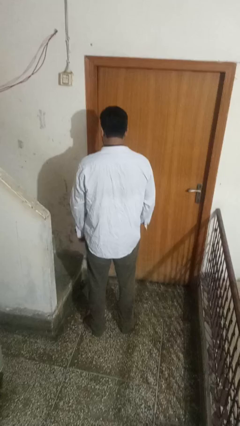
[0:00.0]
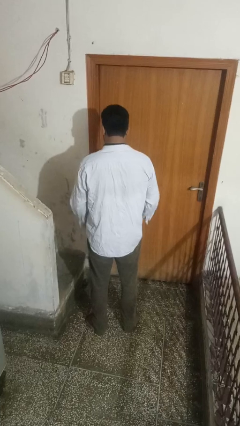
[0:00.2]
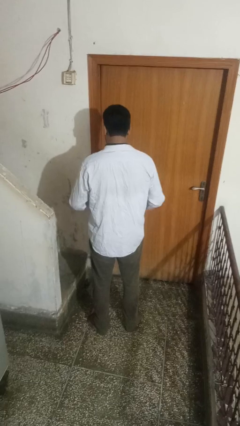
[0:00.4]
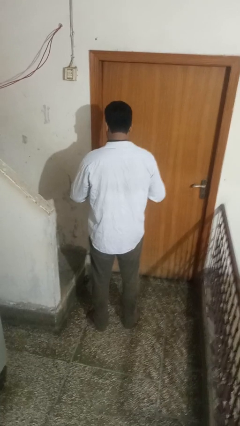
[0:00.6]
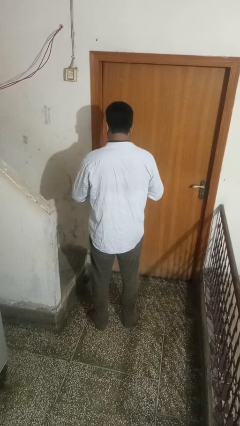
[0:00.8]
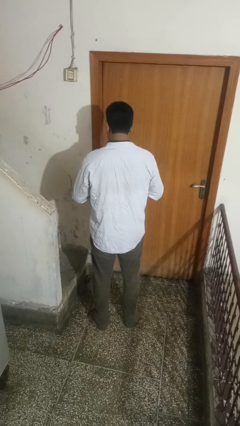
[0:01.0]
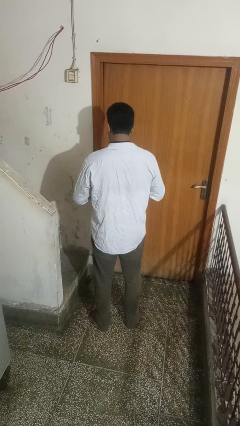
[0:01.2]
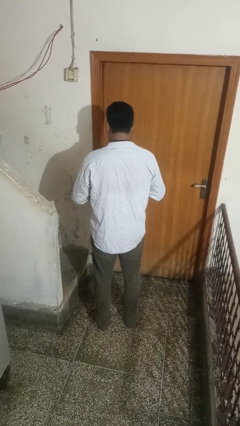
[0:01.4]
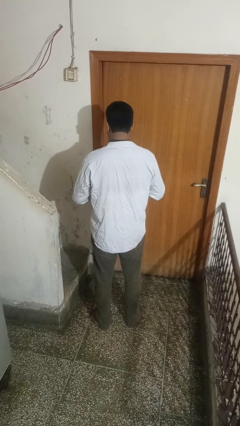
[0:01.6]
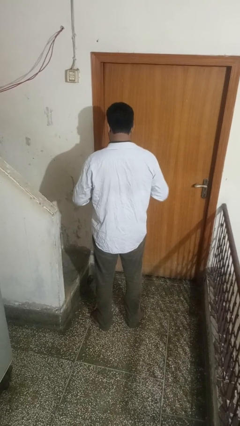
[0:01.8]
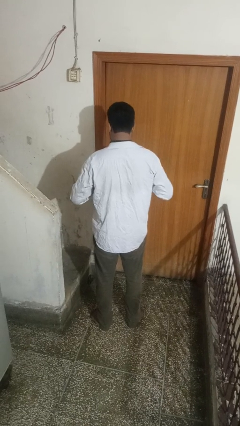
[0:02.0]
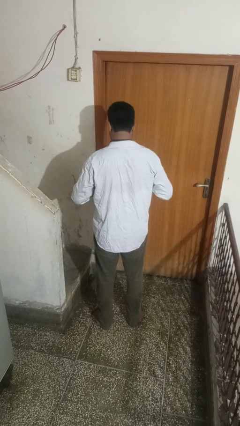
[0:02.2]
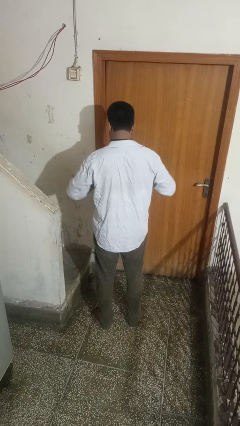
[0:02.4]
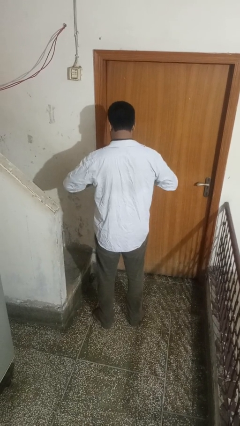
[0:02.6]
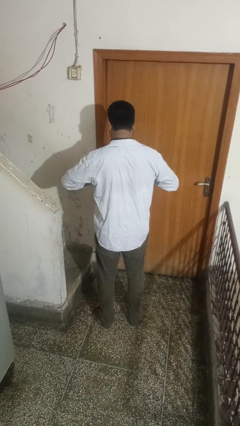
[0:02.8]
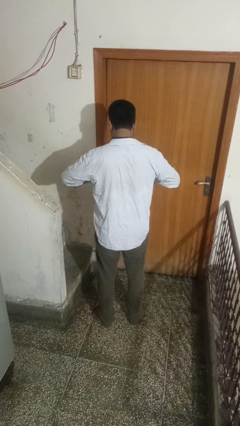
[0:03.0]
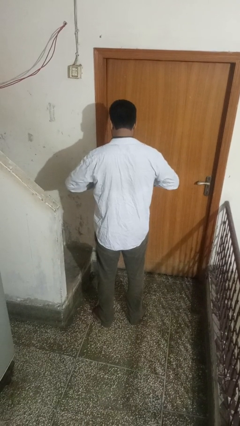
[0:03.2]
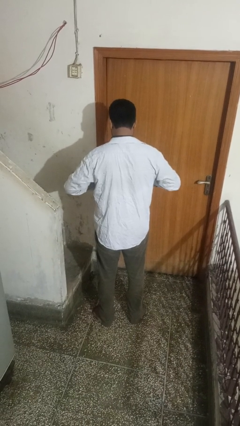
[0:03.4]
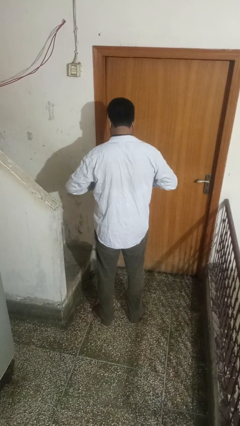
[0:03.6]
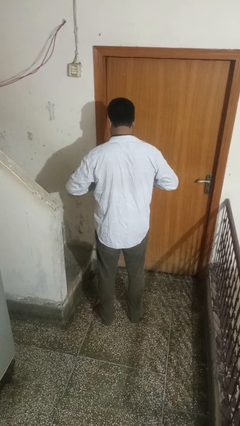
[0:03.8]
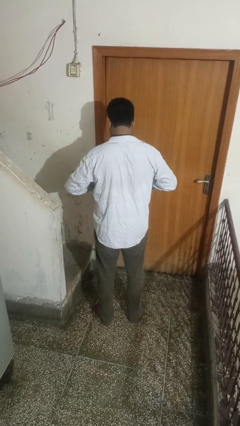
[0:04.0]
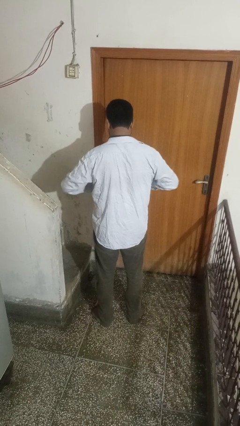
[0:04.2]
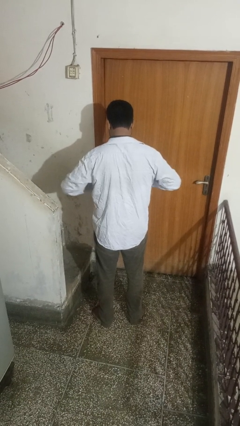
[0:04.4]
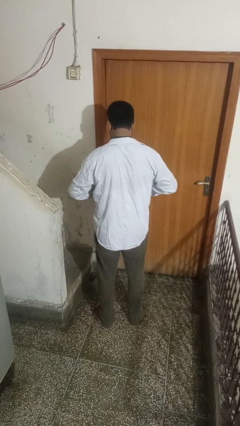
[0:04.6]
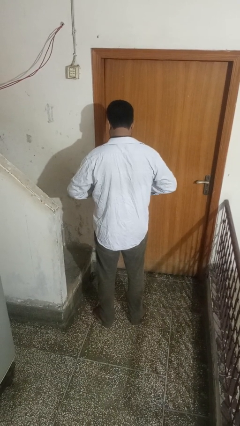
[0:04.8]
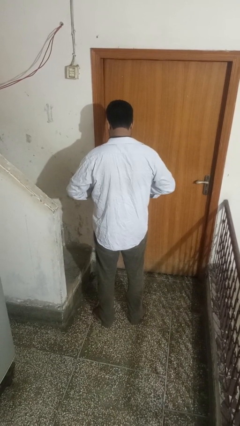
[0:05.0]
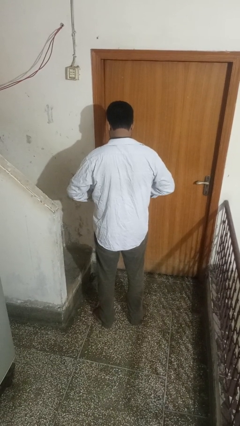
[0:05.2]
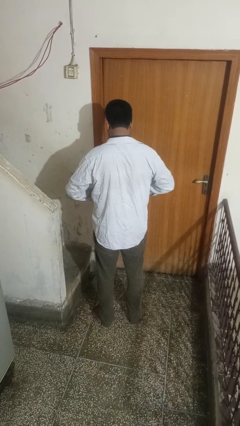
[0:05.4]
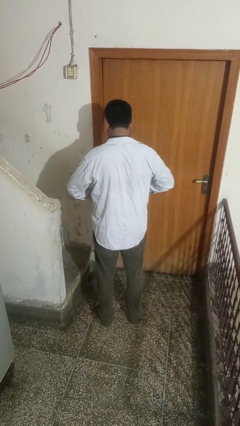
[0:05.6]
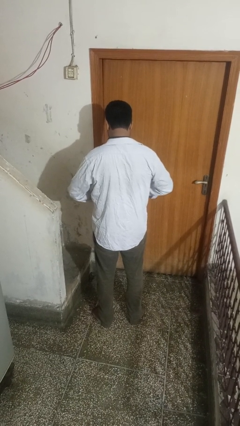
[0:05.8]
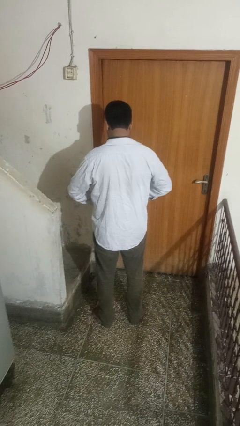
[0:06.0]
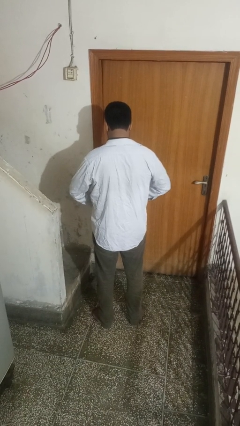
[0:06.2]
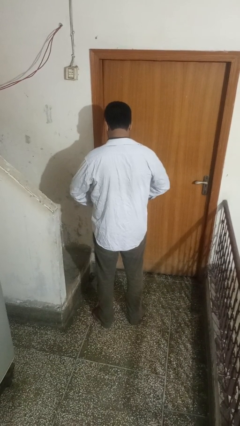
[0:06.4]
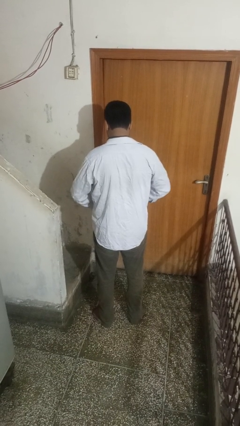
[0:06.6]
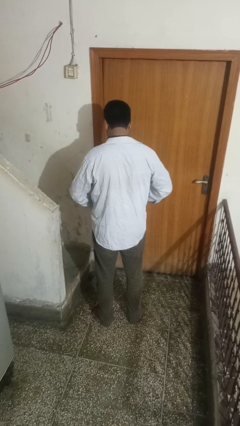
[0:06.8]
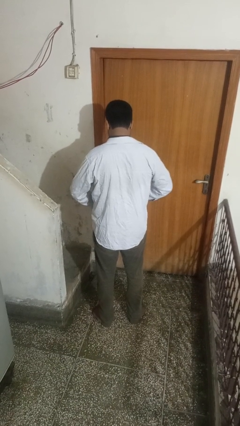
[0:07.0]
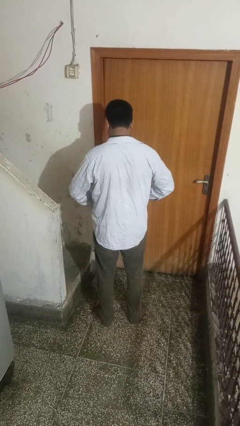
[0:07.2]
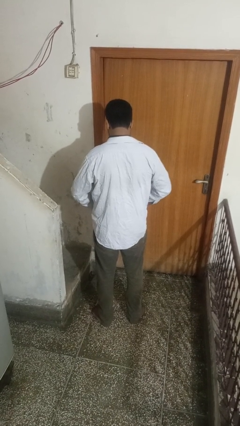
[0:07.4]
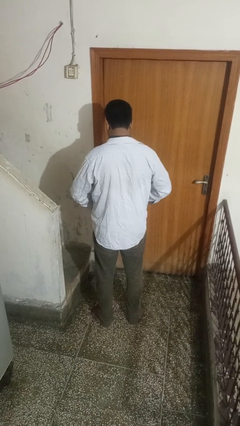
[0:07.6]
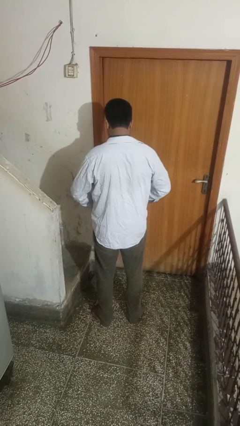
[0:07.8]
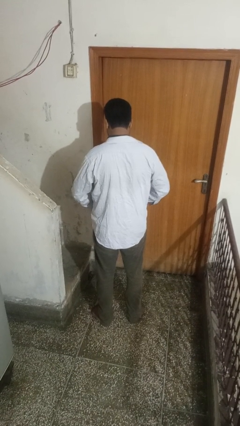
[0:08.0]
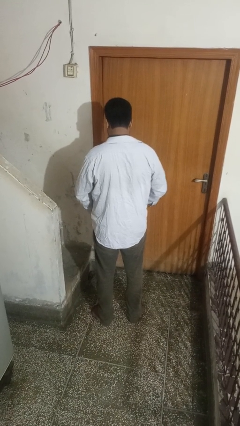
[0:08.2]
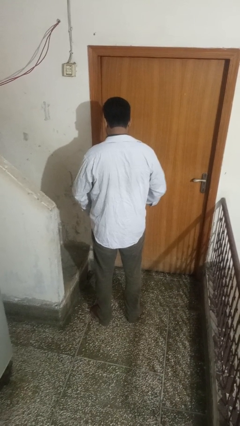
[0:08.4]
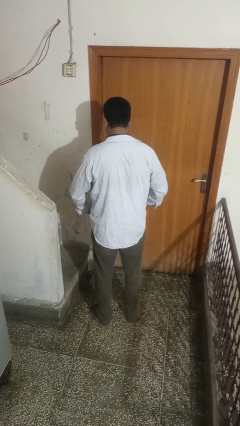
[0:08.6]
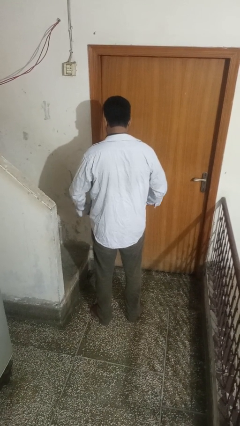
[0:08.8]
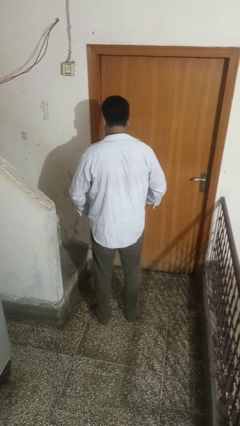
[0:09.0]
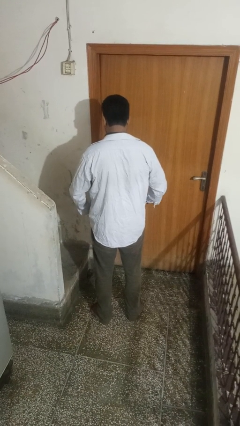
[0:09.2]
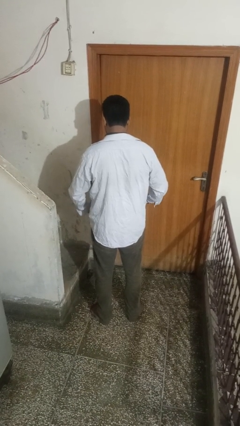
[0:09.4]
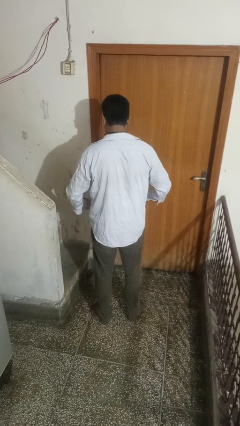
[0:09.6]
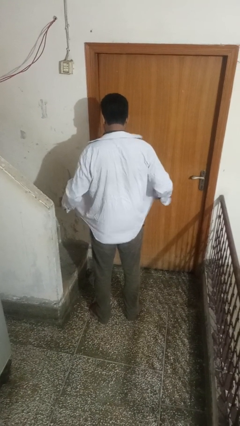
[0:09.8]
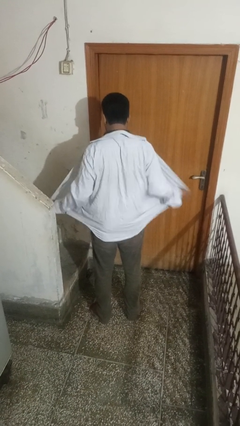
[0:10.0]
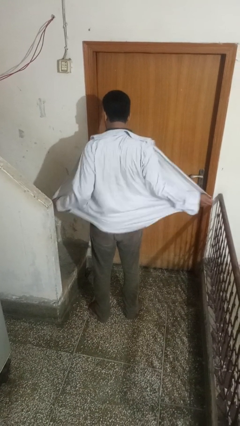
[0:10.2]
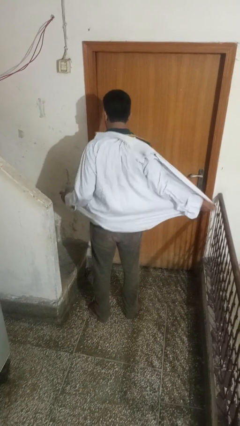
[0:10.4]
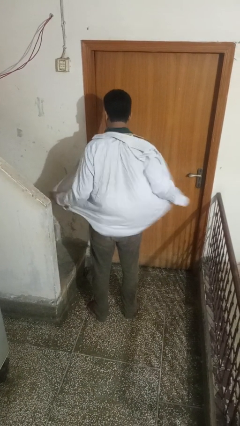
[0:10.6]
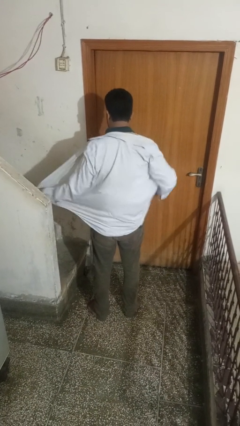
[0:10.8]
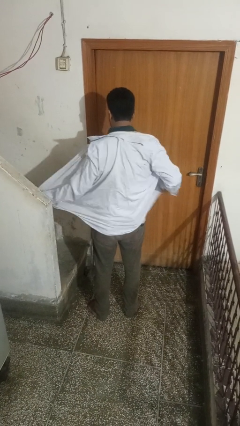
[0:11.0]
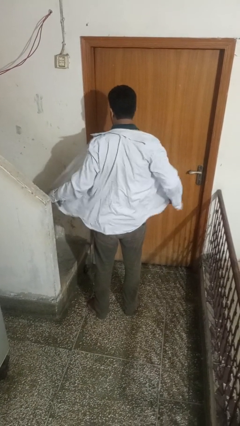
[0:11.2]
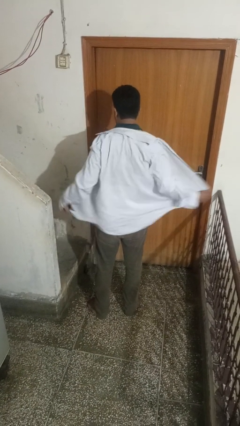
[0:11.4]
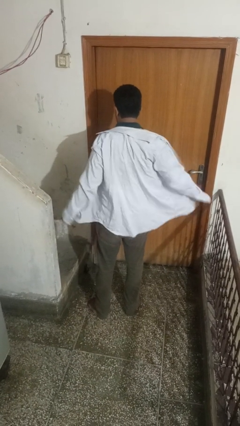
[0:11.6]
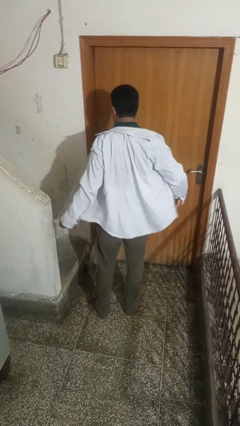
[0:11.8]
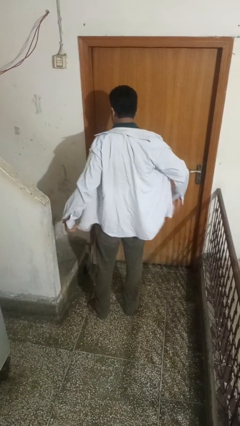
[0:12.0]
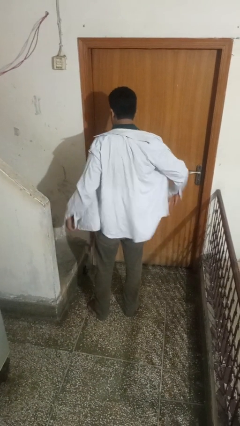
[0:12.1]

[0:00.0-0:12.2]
person unbuttons shirt

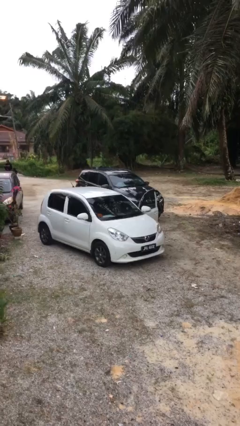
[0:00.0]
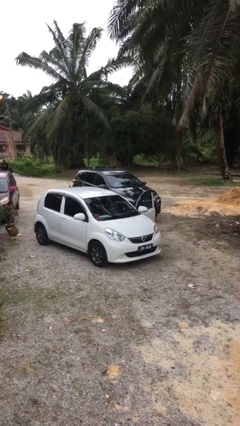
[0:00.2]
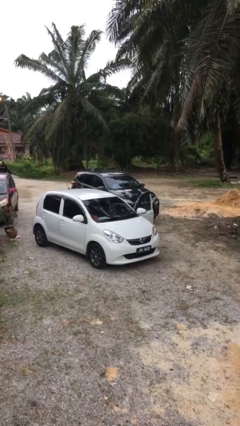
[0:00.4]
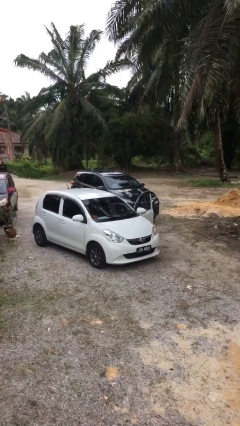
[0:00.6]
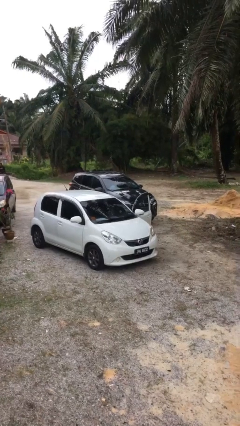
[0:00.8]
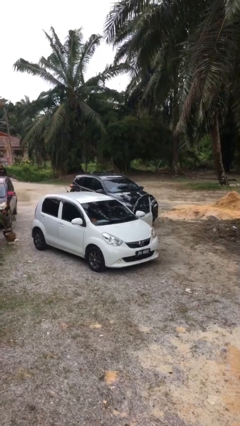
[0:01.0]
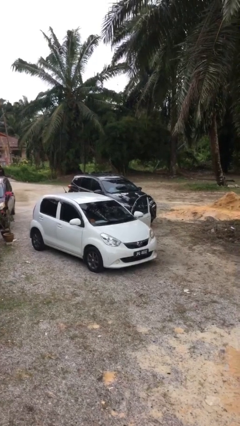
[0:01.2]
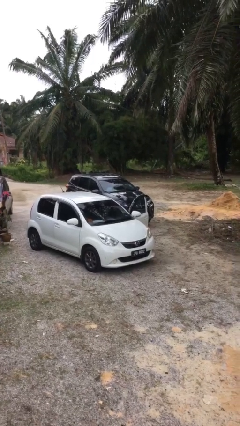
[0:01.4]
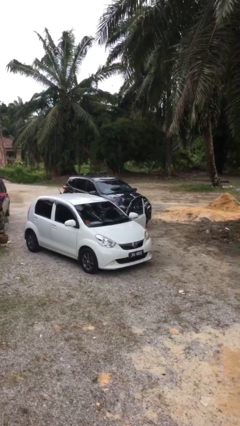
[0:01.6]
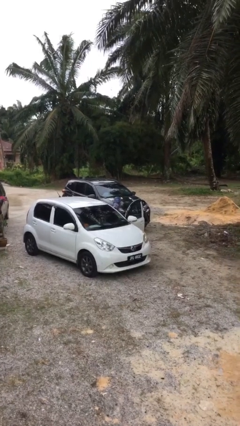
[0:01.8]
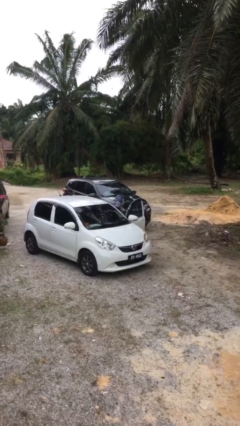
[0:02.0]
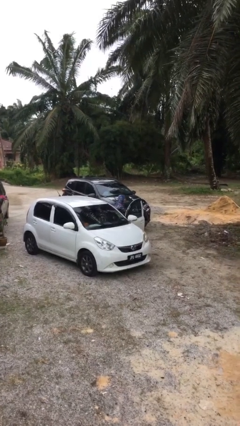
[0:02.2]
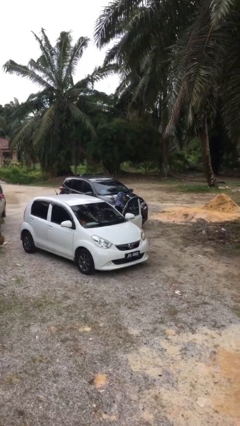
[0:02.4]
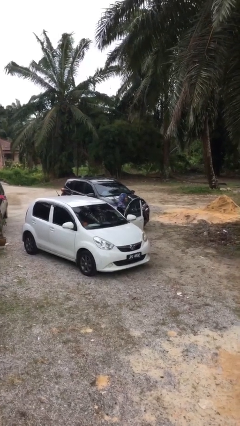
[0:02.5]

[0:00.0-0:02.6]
person exits car

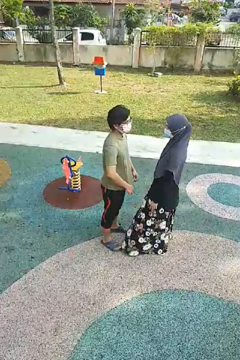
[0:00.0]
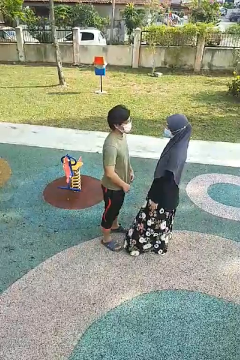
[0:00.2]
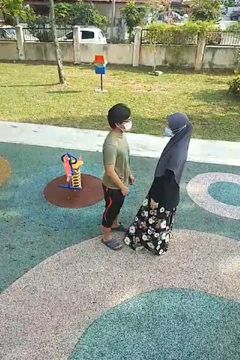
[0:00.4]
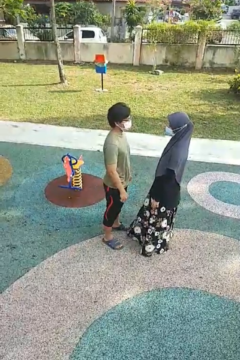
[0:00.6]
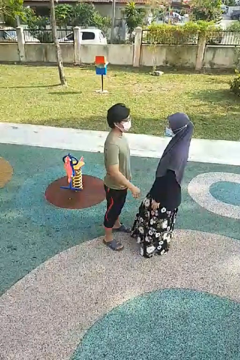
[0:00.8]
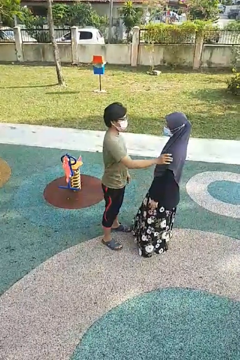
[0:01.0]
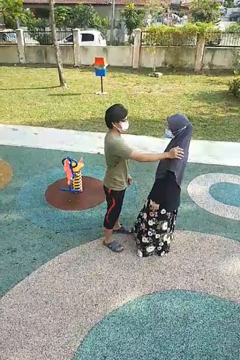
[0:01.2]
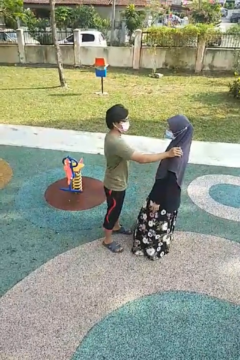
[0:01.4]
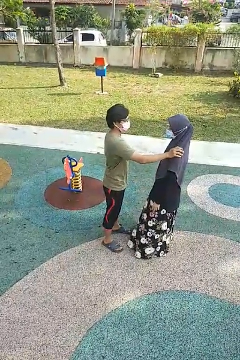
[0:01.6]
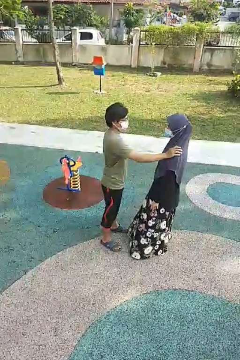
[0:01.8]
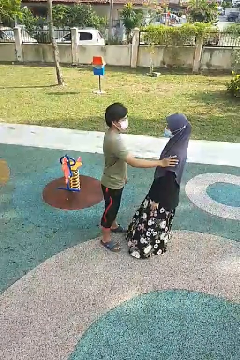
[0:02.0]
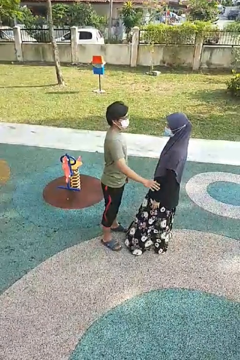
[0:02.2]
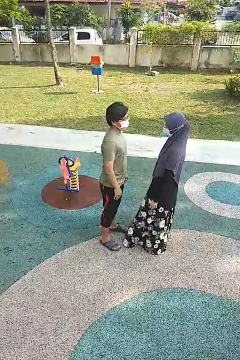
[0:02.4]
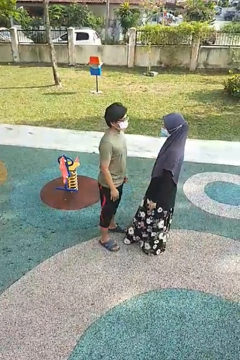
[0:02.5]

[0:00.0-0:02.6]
person pounds shoulders of person

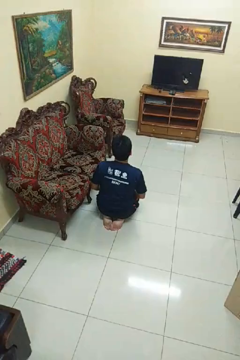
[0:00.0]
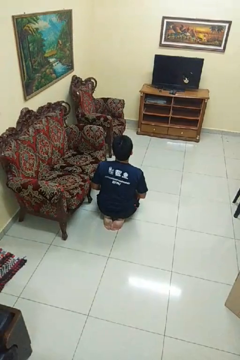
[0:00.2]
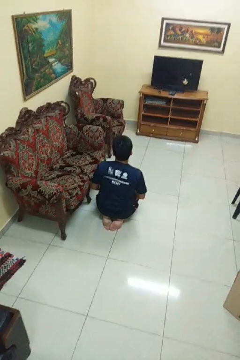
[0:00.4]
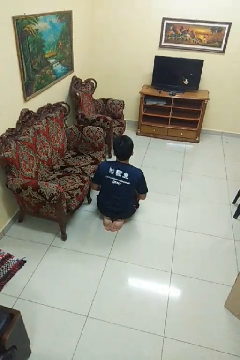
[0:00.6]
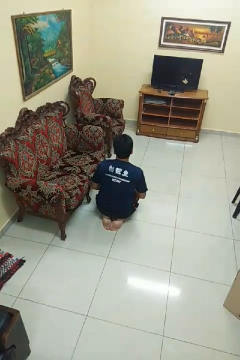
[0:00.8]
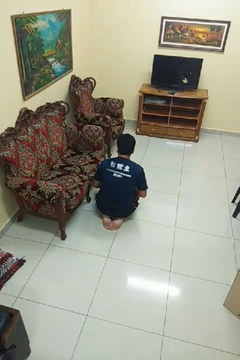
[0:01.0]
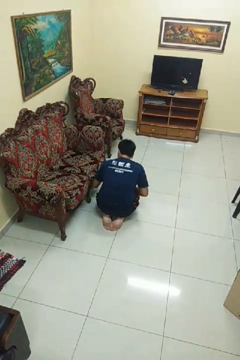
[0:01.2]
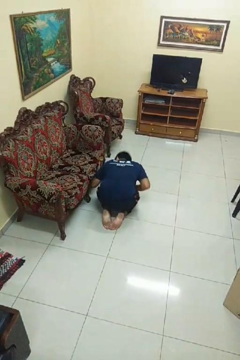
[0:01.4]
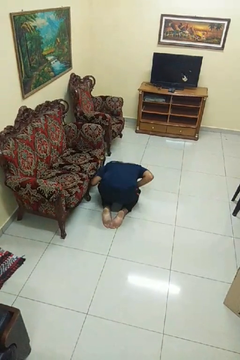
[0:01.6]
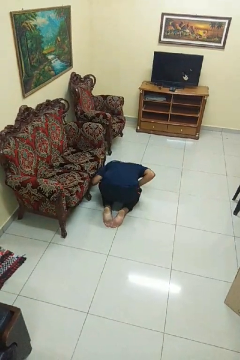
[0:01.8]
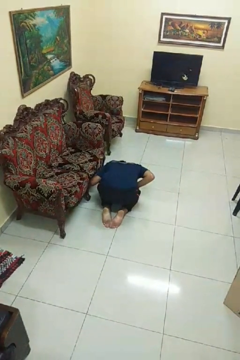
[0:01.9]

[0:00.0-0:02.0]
person searches under couch
